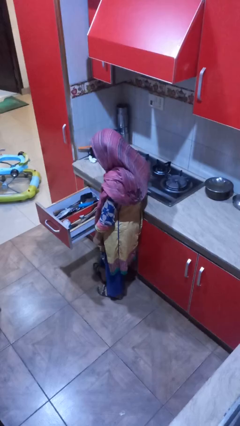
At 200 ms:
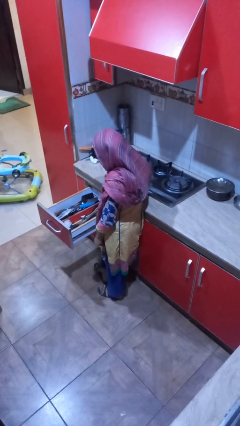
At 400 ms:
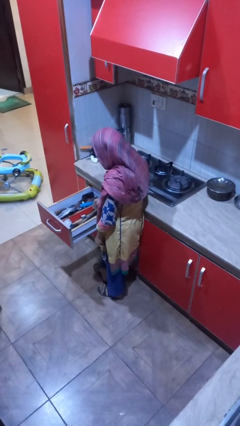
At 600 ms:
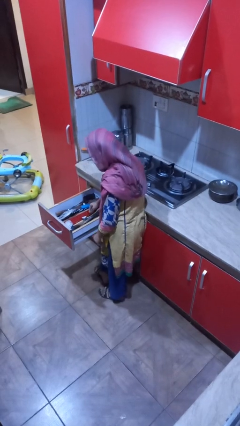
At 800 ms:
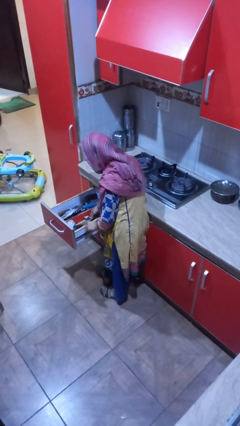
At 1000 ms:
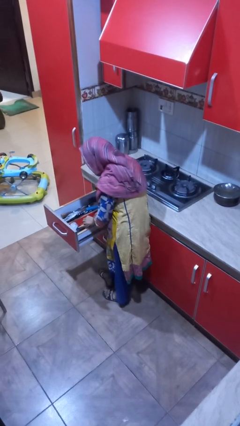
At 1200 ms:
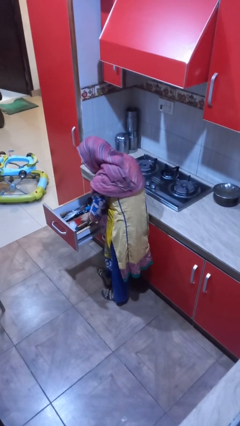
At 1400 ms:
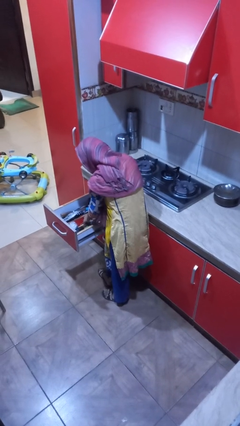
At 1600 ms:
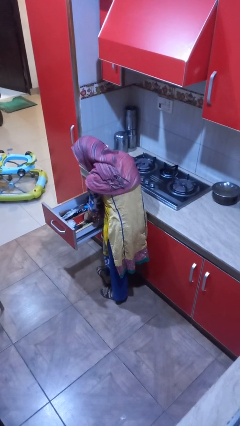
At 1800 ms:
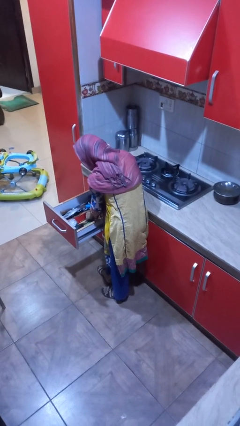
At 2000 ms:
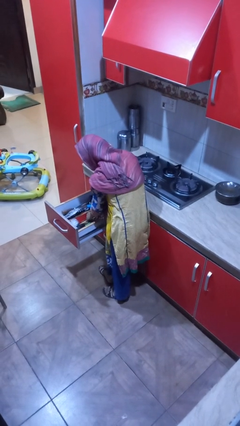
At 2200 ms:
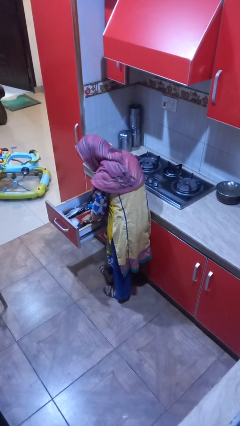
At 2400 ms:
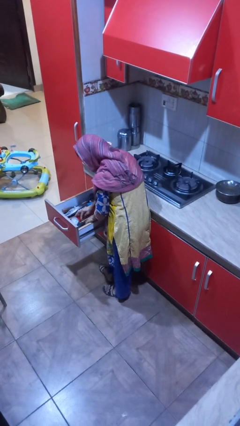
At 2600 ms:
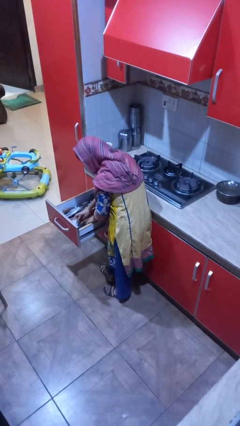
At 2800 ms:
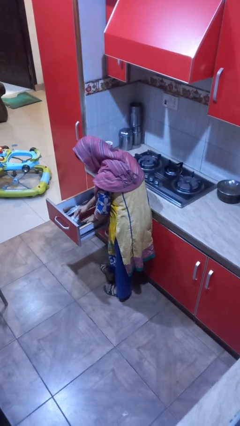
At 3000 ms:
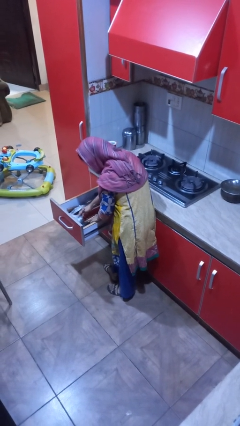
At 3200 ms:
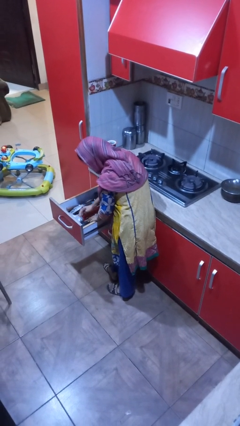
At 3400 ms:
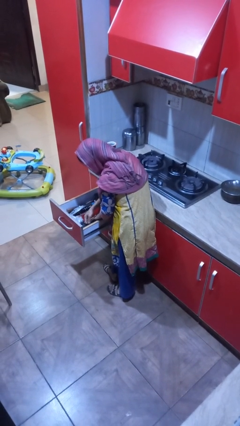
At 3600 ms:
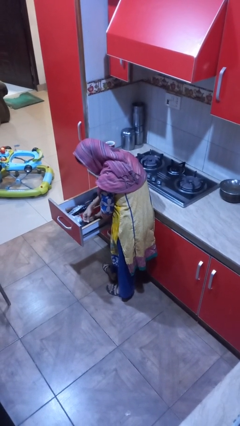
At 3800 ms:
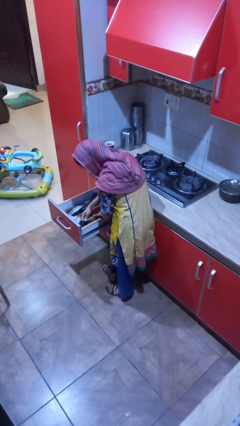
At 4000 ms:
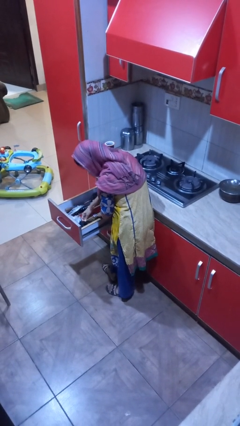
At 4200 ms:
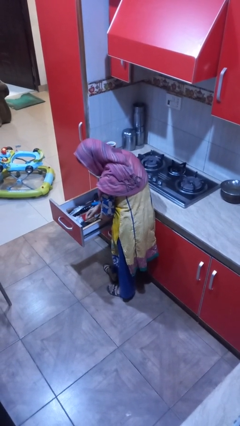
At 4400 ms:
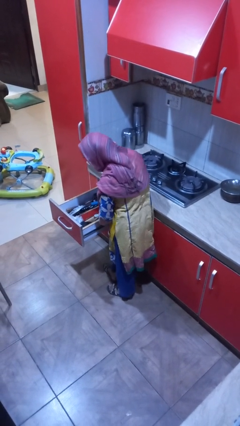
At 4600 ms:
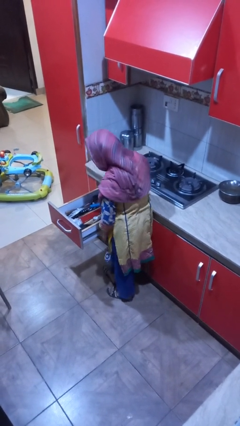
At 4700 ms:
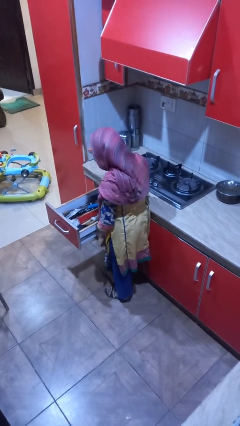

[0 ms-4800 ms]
person searches in kitchen drawer

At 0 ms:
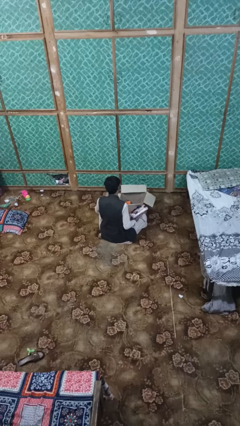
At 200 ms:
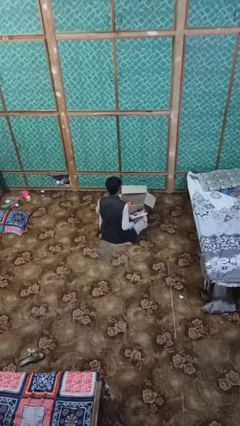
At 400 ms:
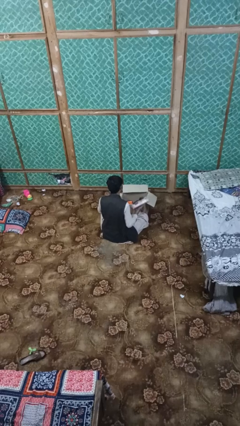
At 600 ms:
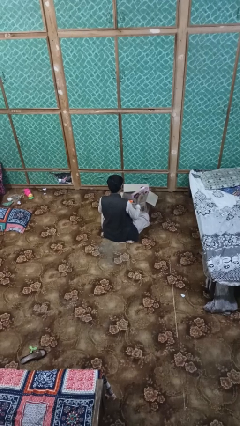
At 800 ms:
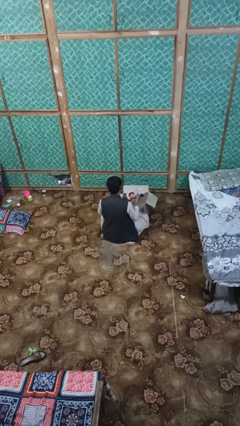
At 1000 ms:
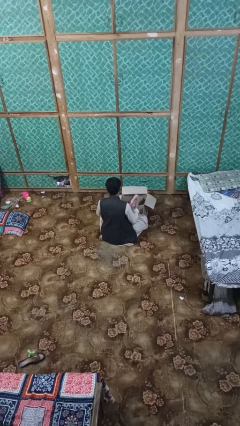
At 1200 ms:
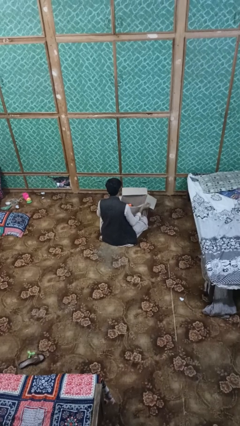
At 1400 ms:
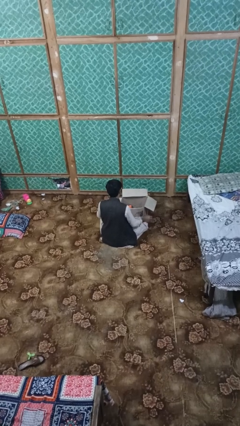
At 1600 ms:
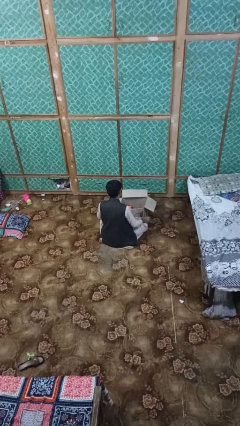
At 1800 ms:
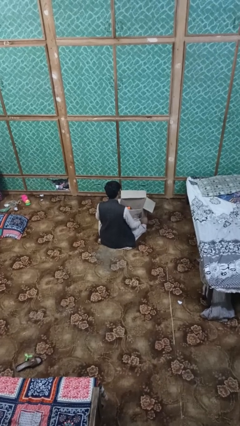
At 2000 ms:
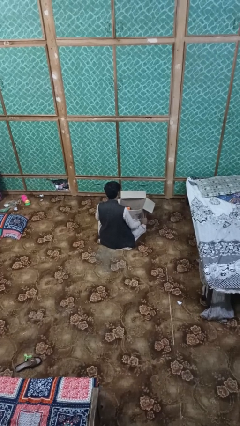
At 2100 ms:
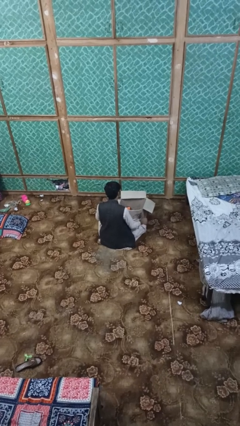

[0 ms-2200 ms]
person puts object into box

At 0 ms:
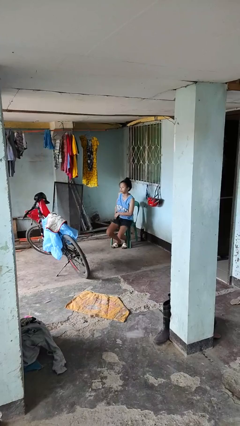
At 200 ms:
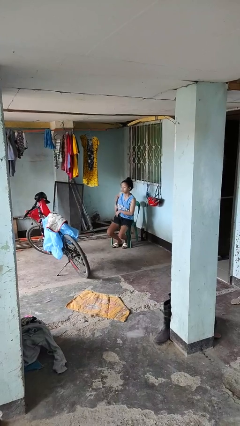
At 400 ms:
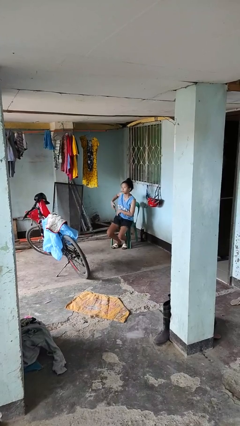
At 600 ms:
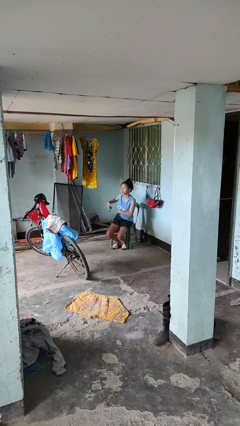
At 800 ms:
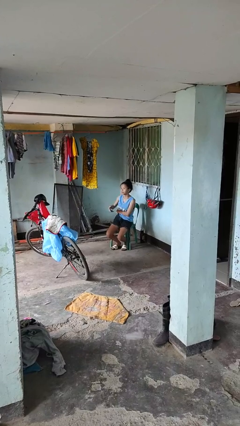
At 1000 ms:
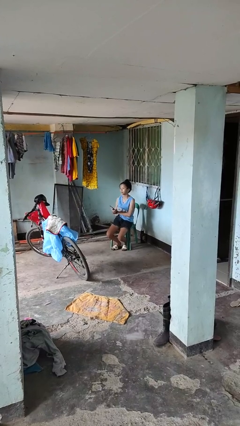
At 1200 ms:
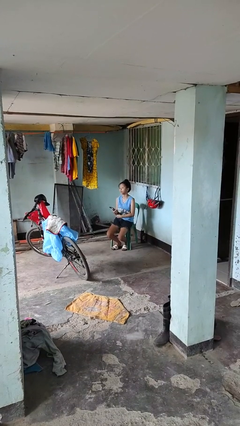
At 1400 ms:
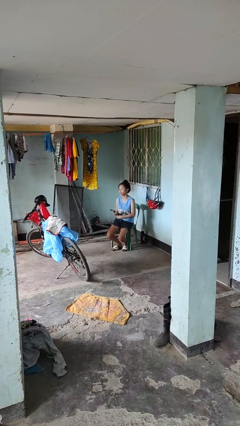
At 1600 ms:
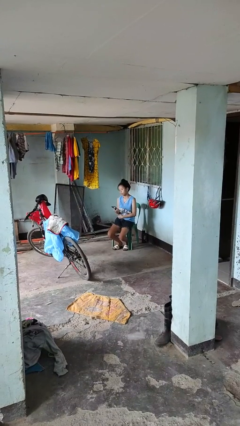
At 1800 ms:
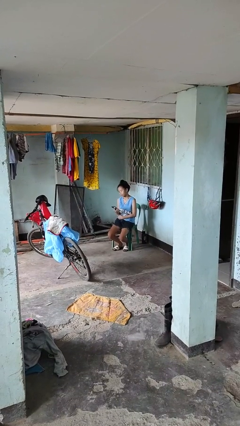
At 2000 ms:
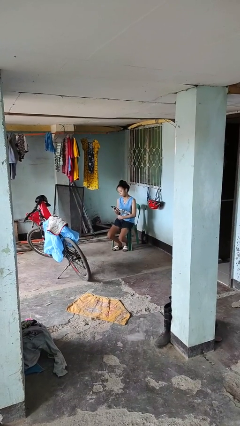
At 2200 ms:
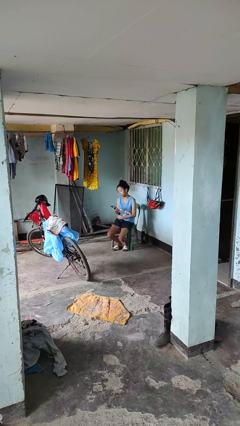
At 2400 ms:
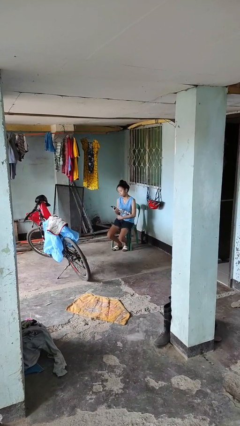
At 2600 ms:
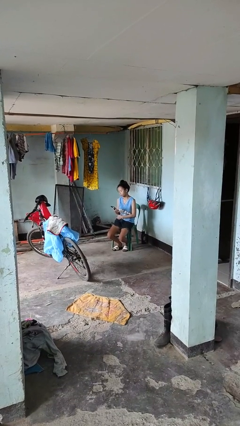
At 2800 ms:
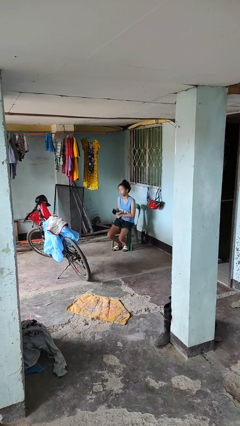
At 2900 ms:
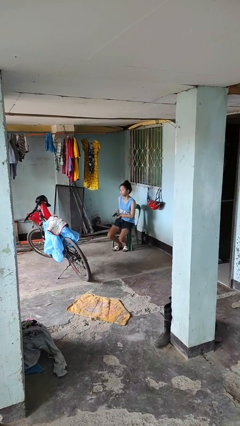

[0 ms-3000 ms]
person takes phone from pocket

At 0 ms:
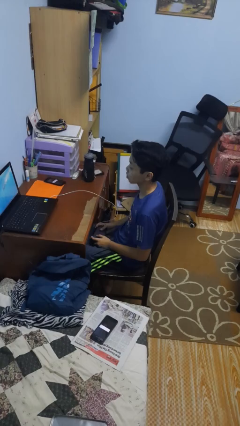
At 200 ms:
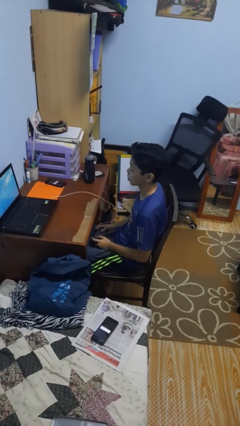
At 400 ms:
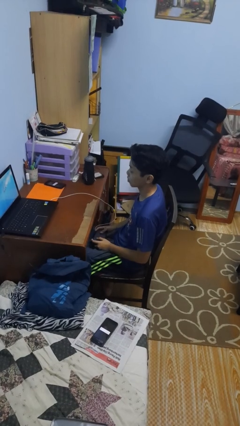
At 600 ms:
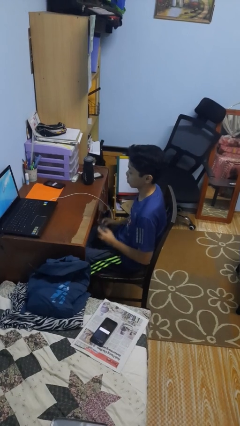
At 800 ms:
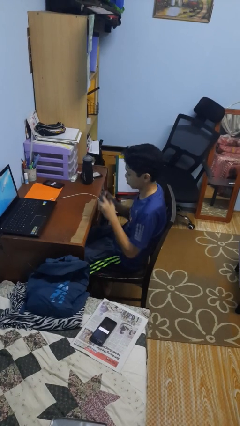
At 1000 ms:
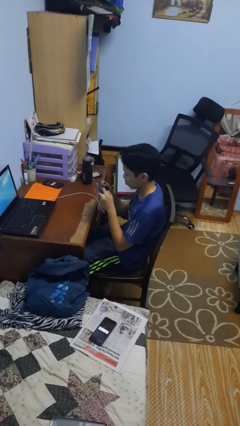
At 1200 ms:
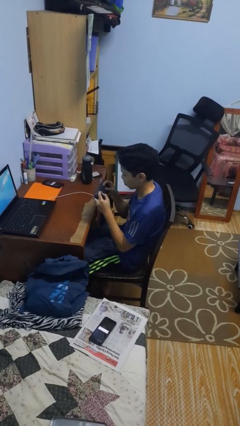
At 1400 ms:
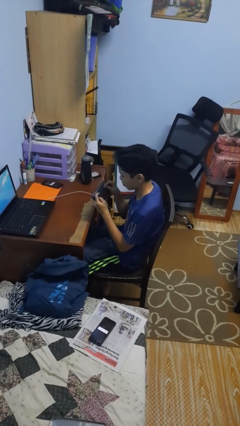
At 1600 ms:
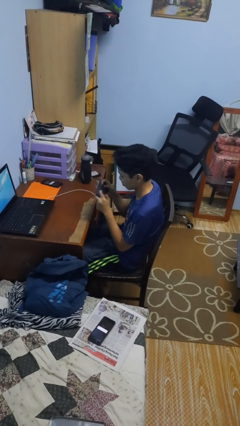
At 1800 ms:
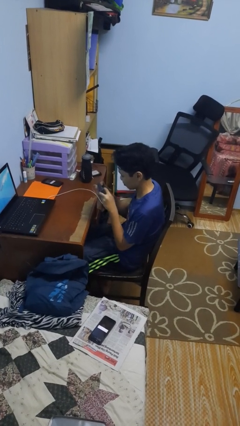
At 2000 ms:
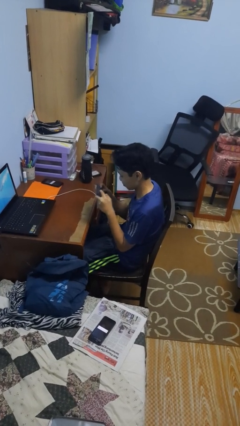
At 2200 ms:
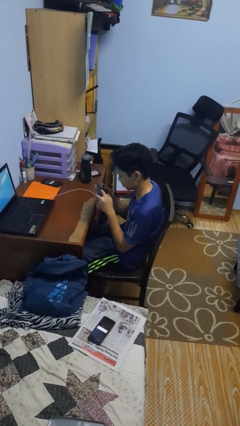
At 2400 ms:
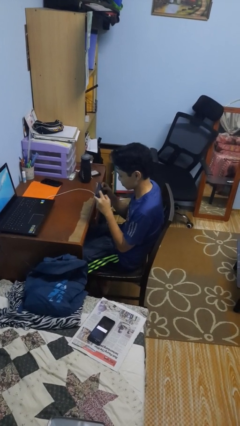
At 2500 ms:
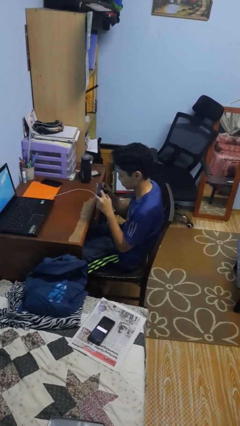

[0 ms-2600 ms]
person interacts with handheld game

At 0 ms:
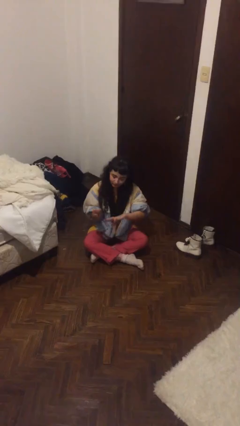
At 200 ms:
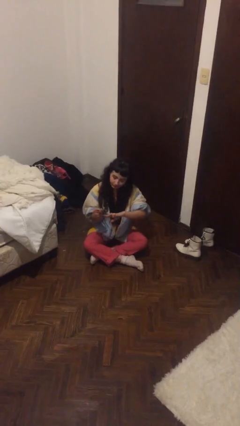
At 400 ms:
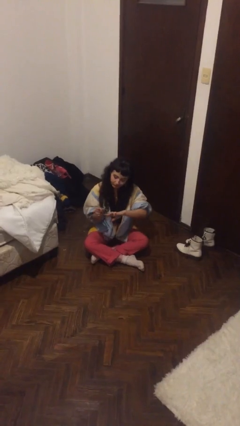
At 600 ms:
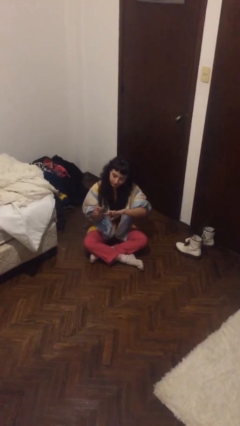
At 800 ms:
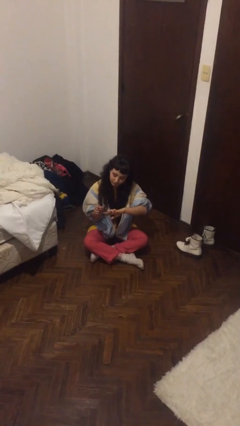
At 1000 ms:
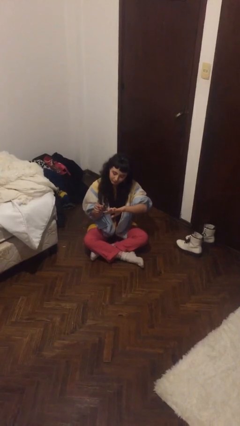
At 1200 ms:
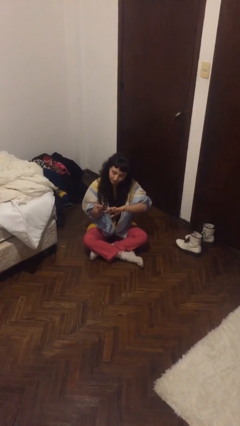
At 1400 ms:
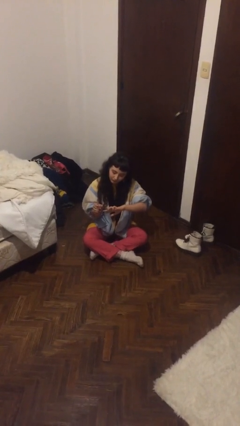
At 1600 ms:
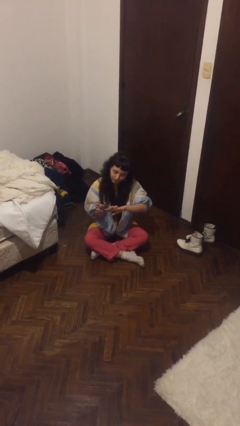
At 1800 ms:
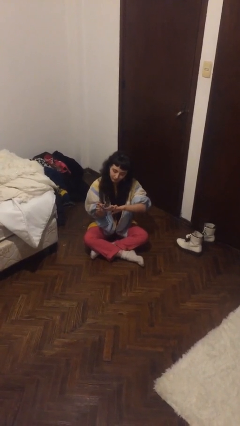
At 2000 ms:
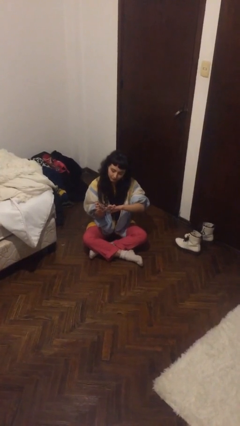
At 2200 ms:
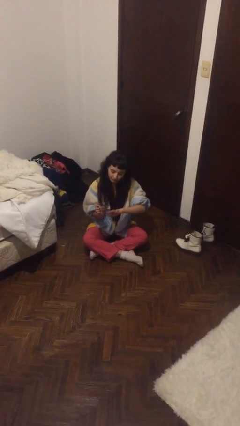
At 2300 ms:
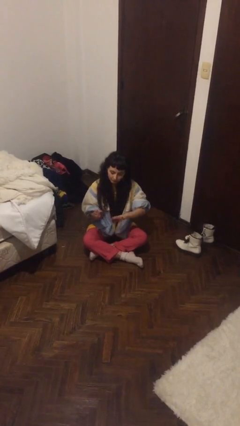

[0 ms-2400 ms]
person clips fingernails

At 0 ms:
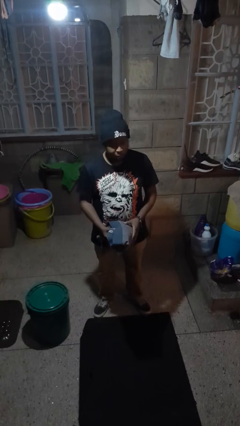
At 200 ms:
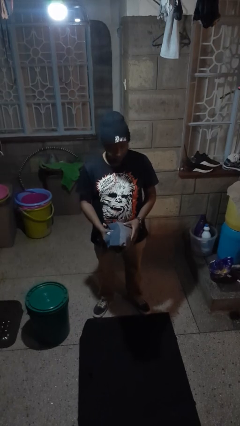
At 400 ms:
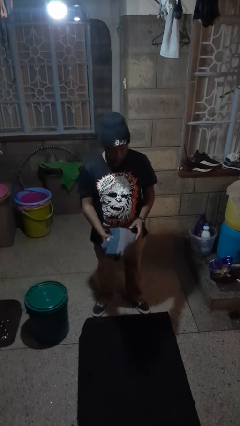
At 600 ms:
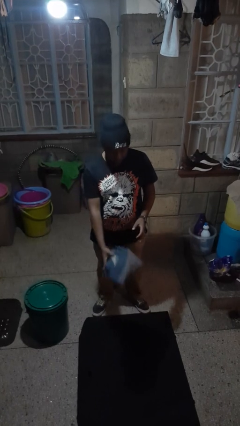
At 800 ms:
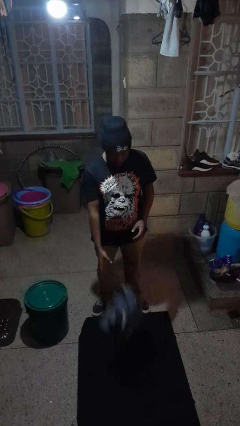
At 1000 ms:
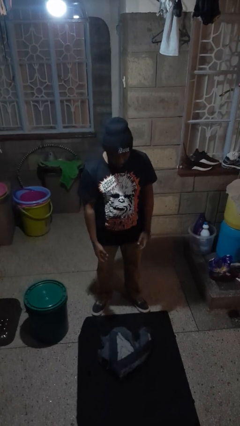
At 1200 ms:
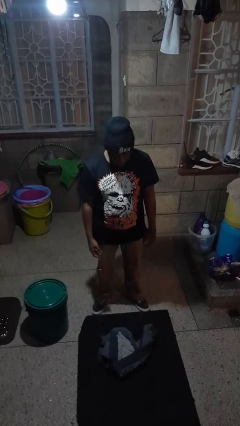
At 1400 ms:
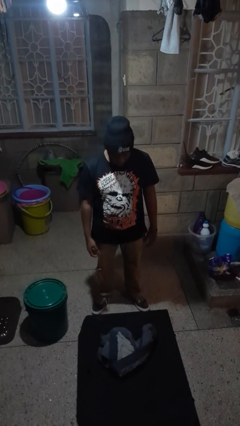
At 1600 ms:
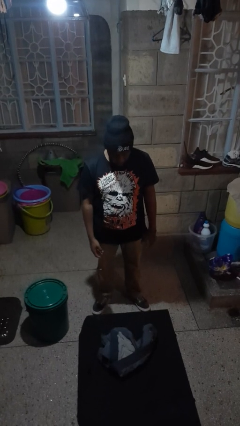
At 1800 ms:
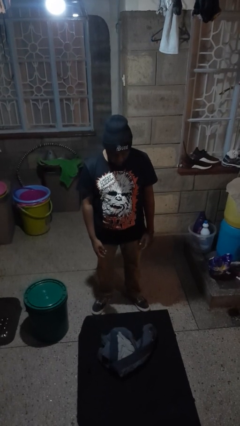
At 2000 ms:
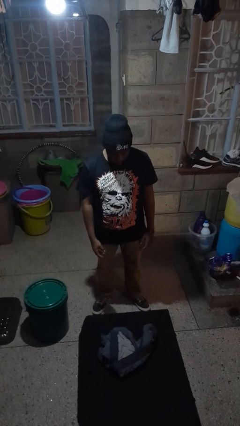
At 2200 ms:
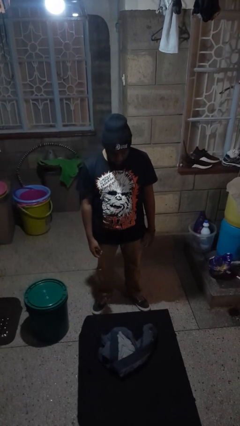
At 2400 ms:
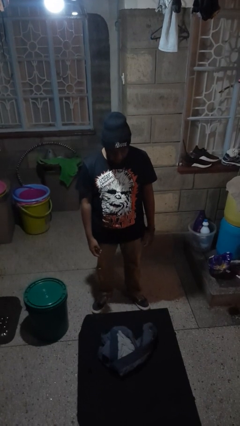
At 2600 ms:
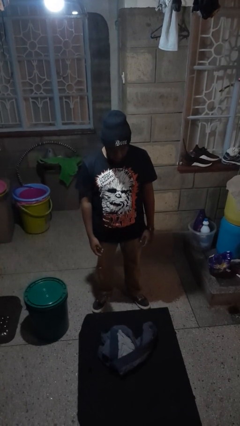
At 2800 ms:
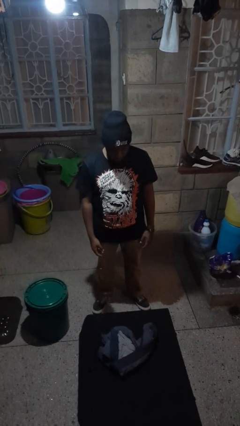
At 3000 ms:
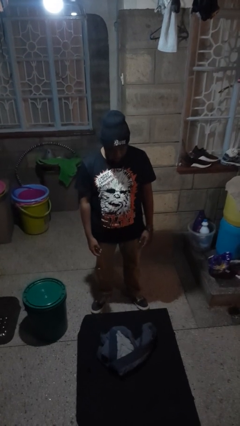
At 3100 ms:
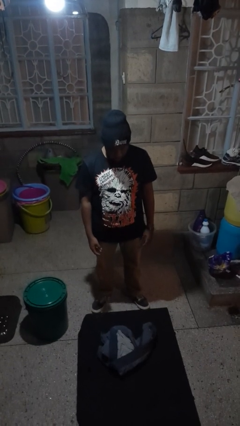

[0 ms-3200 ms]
person drops object
